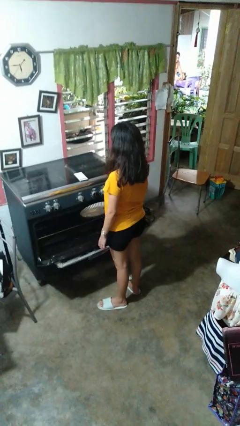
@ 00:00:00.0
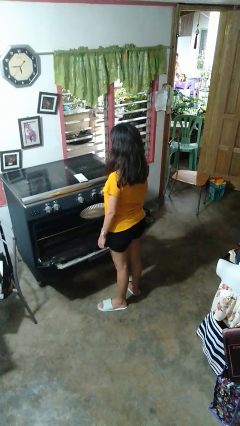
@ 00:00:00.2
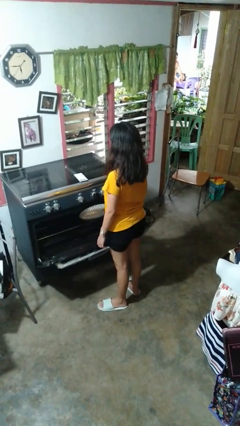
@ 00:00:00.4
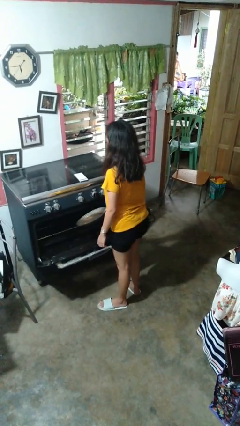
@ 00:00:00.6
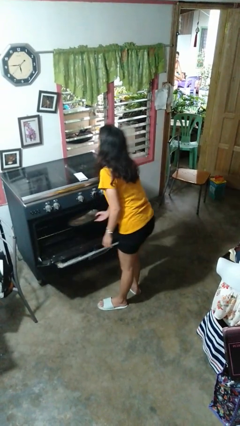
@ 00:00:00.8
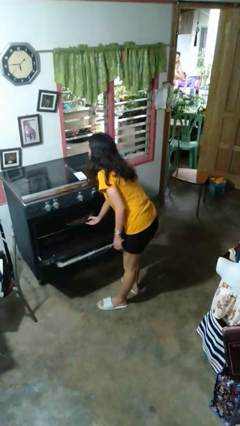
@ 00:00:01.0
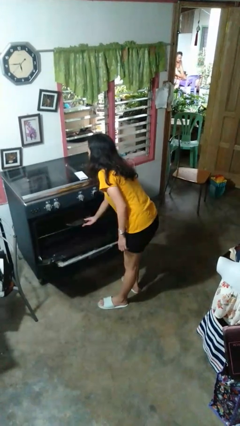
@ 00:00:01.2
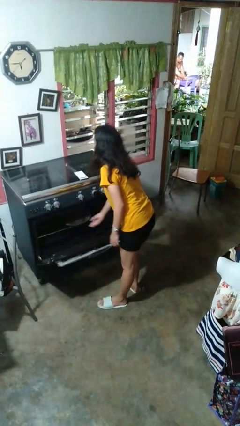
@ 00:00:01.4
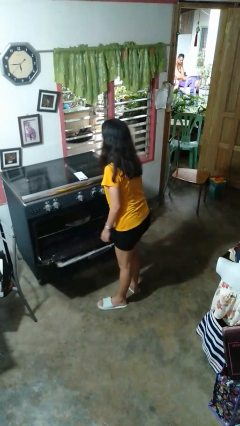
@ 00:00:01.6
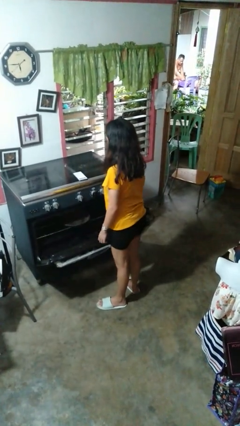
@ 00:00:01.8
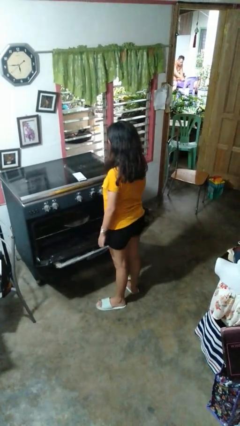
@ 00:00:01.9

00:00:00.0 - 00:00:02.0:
person puts object into oven

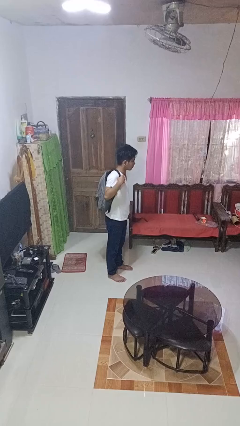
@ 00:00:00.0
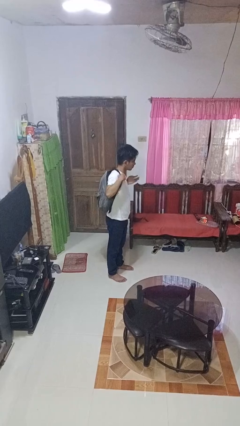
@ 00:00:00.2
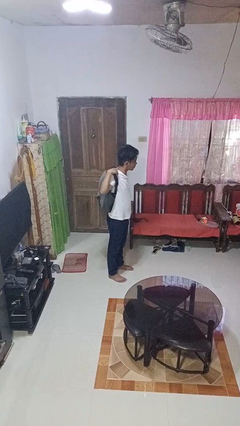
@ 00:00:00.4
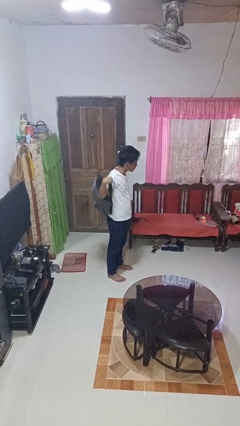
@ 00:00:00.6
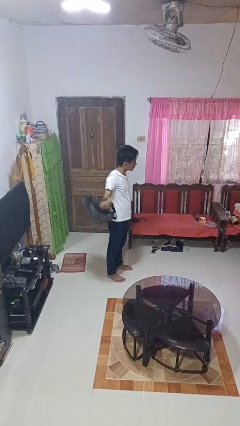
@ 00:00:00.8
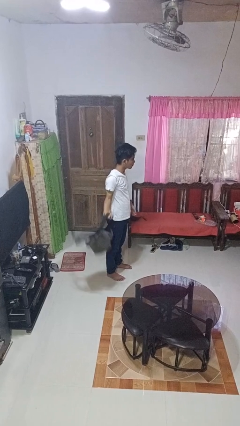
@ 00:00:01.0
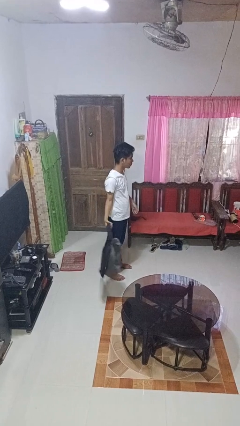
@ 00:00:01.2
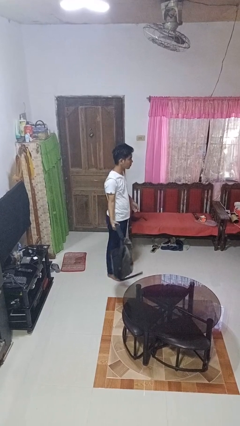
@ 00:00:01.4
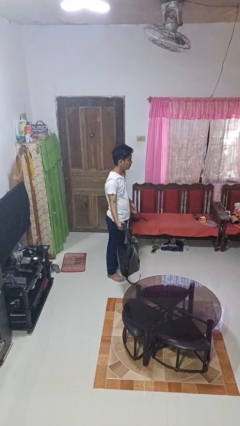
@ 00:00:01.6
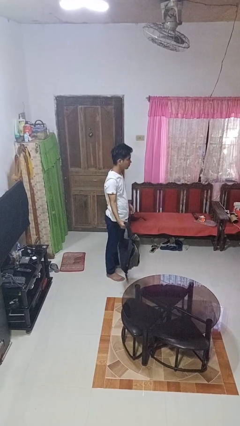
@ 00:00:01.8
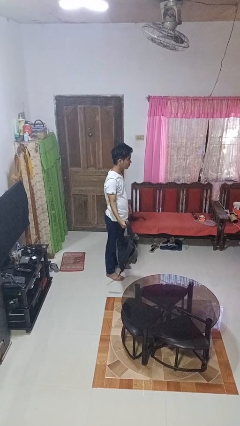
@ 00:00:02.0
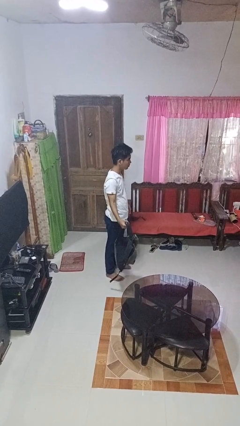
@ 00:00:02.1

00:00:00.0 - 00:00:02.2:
person takes off backpack

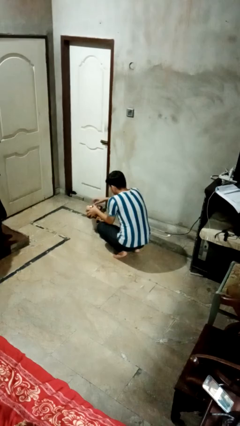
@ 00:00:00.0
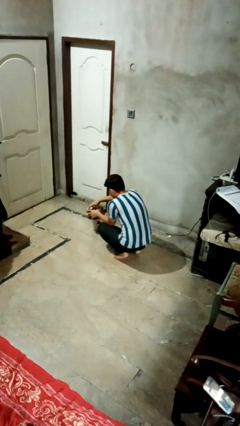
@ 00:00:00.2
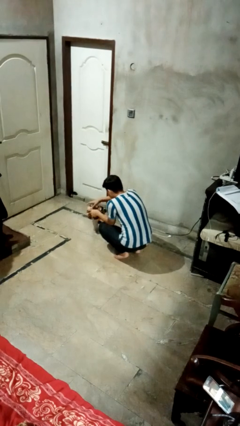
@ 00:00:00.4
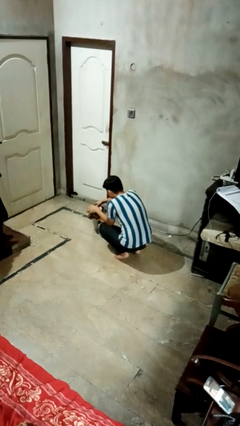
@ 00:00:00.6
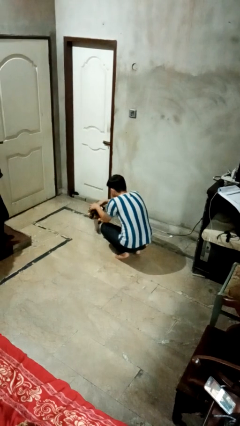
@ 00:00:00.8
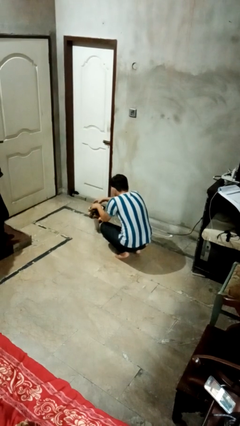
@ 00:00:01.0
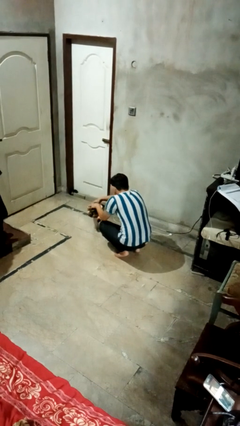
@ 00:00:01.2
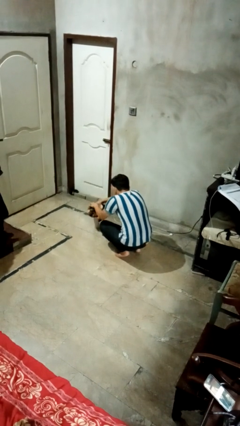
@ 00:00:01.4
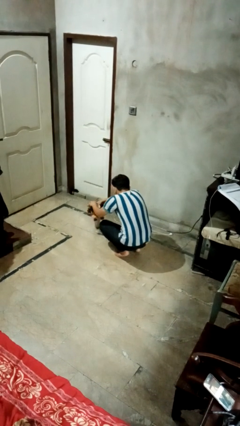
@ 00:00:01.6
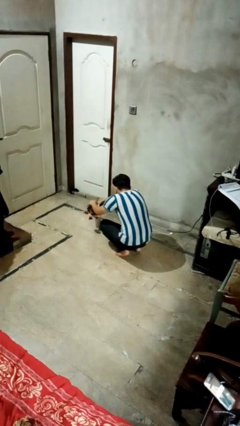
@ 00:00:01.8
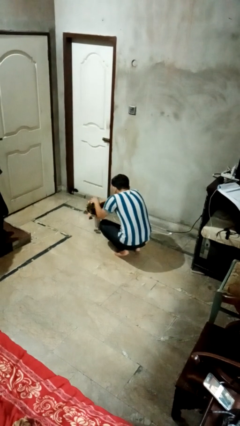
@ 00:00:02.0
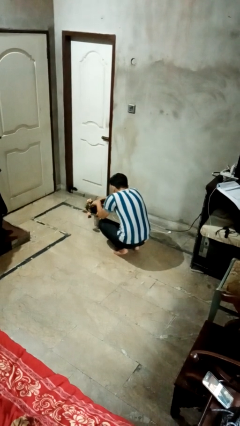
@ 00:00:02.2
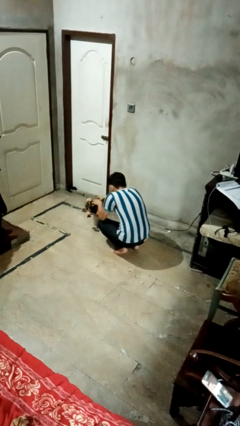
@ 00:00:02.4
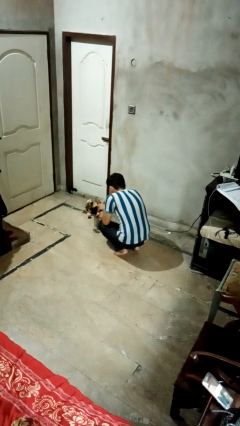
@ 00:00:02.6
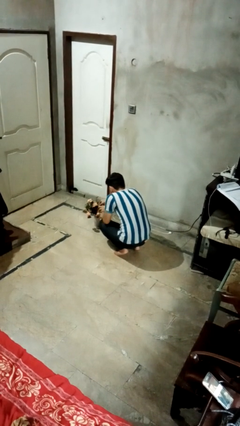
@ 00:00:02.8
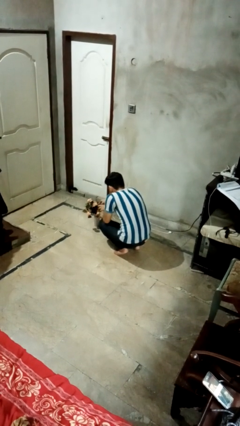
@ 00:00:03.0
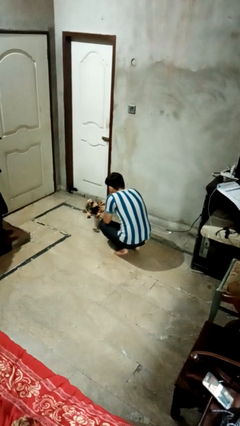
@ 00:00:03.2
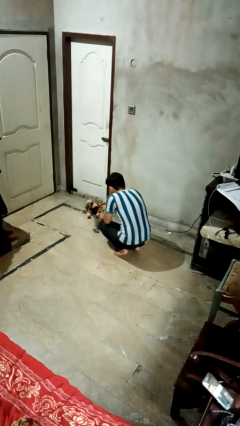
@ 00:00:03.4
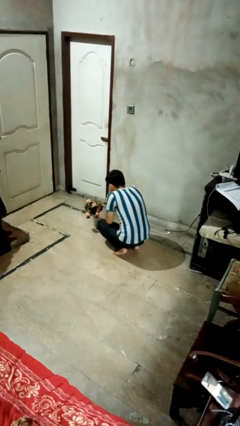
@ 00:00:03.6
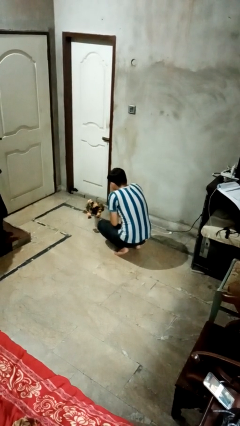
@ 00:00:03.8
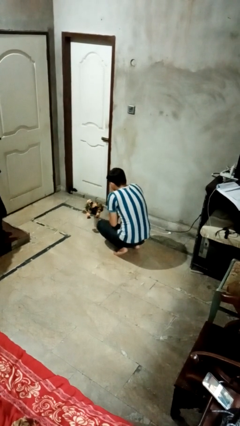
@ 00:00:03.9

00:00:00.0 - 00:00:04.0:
person arranges flowers in vase

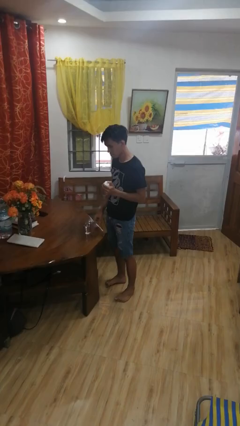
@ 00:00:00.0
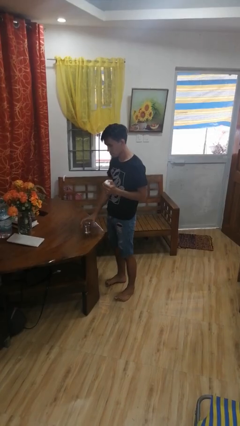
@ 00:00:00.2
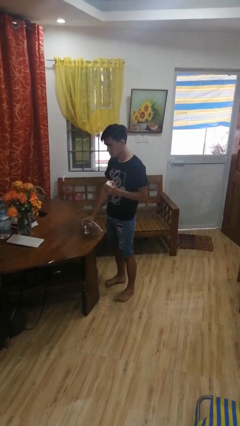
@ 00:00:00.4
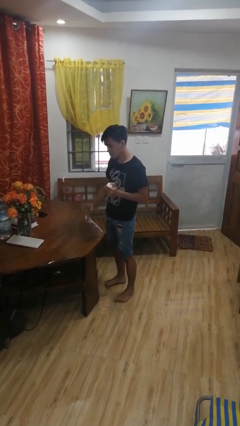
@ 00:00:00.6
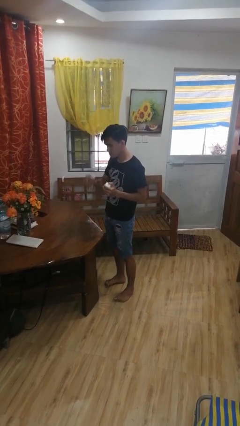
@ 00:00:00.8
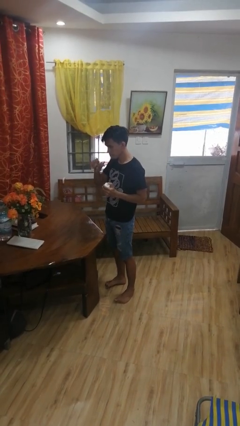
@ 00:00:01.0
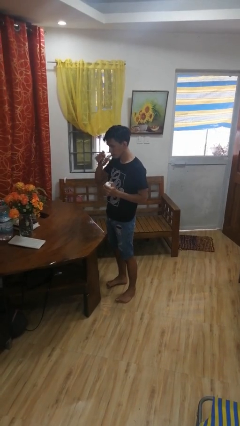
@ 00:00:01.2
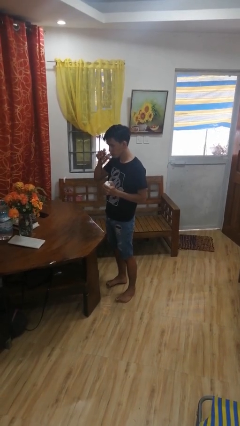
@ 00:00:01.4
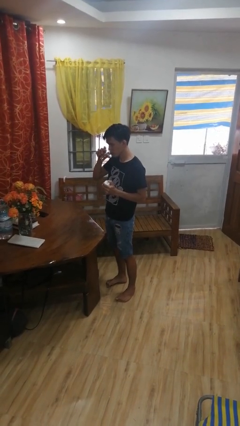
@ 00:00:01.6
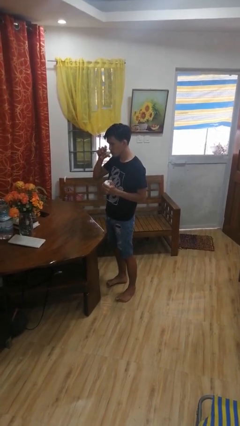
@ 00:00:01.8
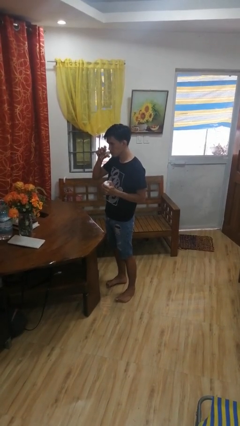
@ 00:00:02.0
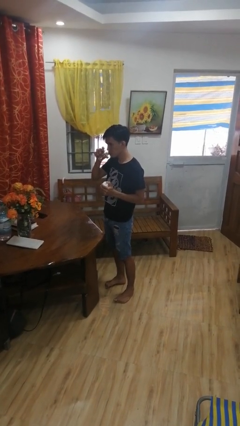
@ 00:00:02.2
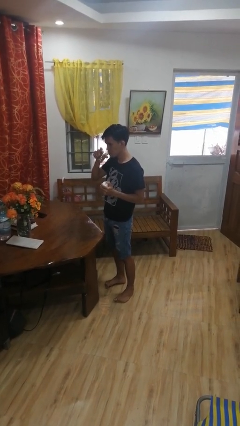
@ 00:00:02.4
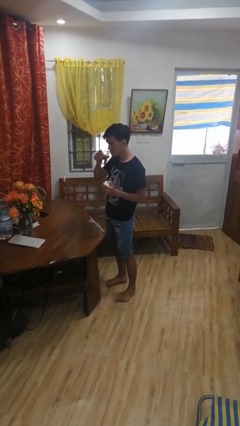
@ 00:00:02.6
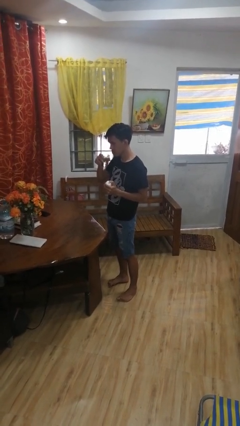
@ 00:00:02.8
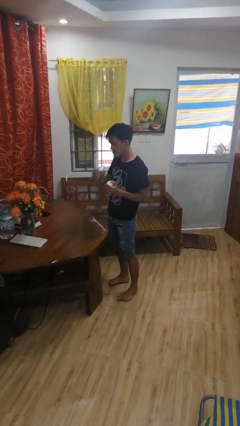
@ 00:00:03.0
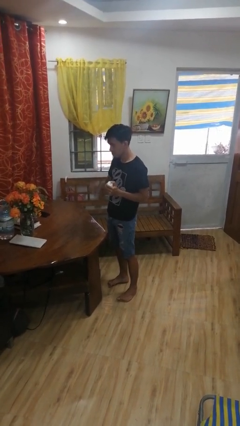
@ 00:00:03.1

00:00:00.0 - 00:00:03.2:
person drinks from cup

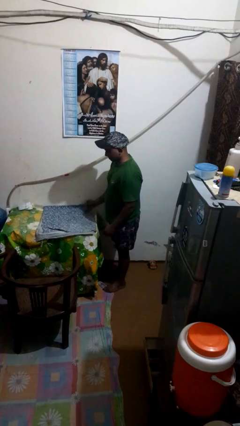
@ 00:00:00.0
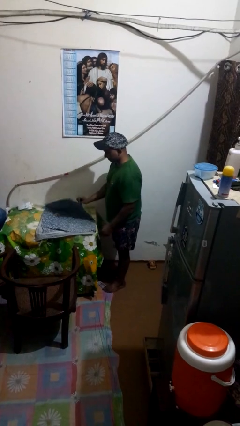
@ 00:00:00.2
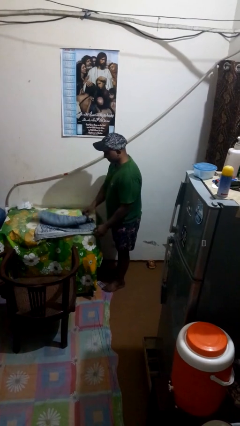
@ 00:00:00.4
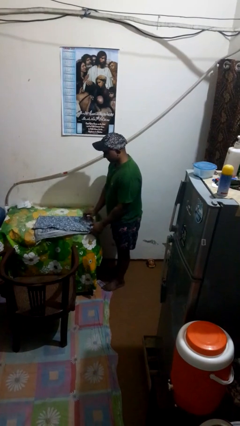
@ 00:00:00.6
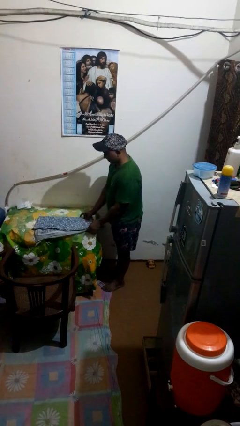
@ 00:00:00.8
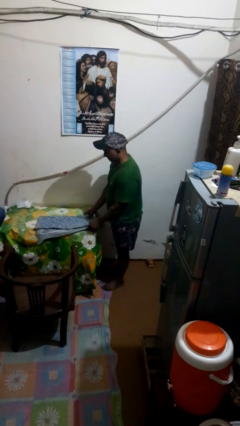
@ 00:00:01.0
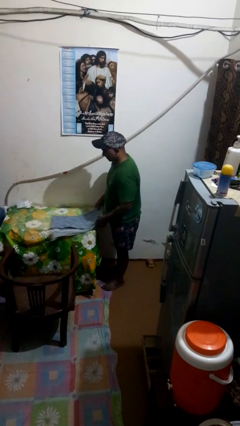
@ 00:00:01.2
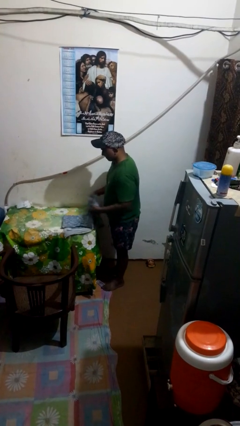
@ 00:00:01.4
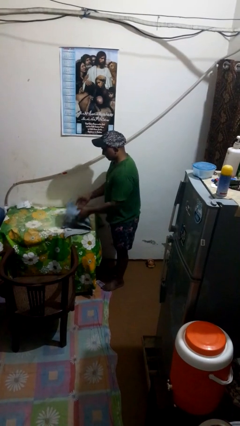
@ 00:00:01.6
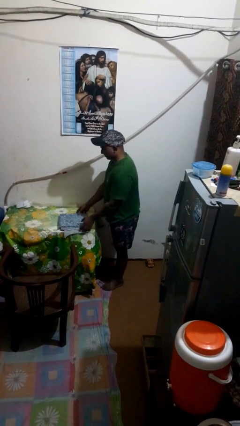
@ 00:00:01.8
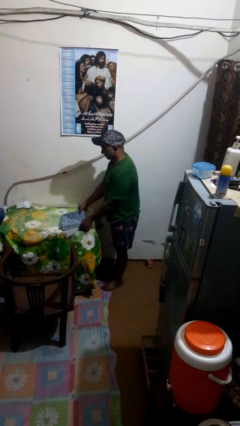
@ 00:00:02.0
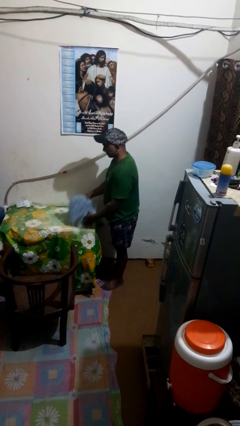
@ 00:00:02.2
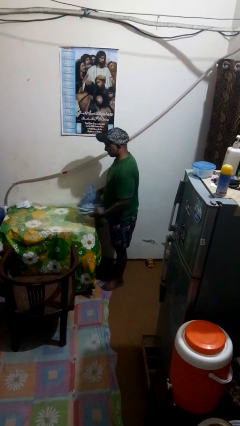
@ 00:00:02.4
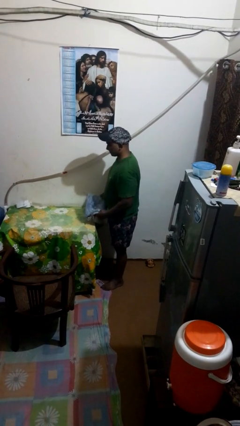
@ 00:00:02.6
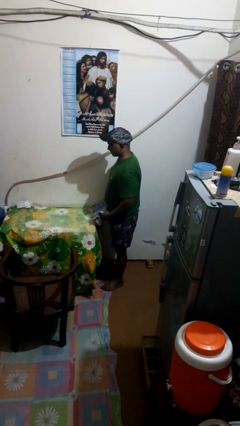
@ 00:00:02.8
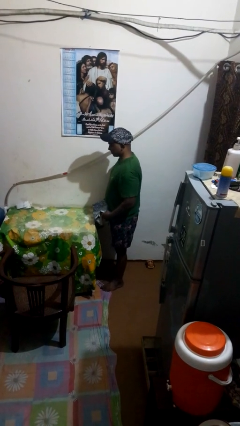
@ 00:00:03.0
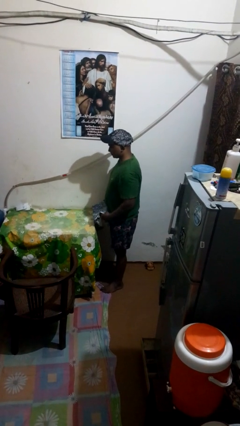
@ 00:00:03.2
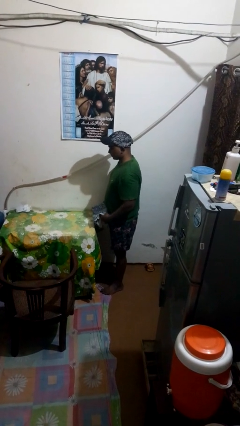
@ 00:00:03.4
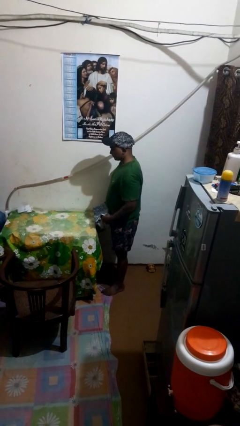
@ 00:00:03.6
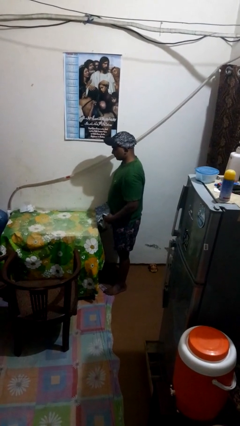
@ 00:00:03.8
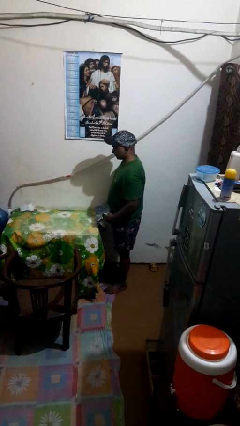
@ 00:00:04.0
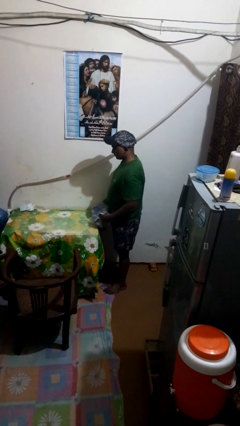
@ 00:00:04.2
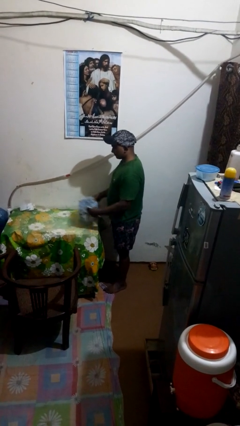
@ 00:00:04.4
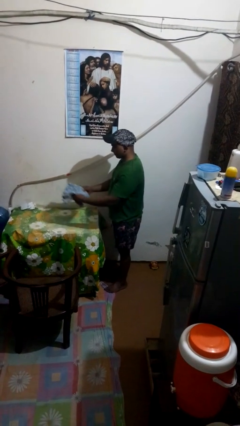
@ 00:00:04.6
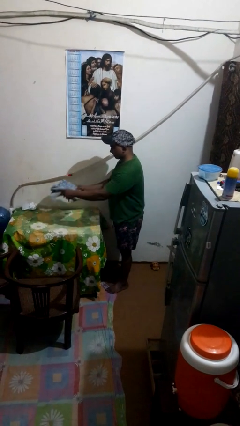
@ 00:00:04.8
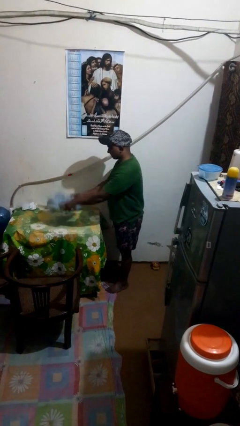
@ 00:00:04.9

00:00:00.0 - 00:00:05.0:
person folds tablecloth

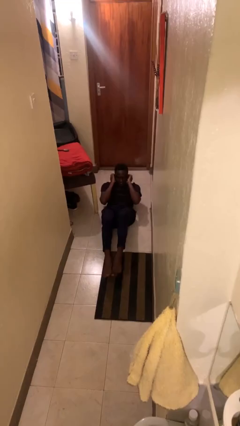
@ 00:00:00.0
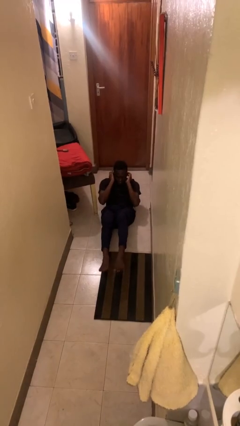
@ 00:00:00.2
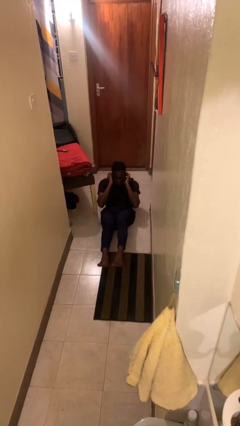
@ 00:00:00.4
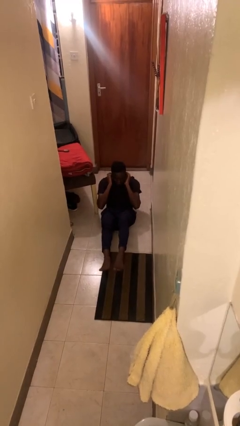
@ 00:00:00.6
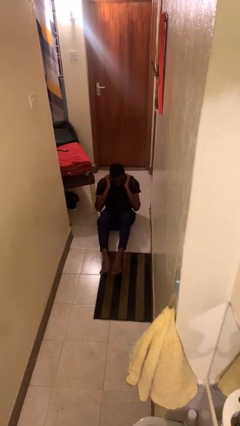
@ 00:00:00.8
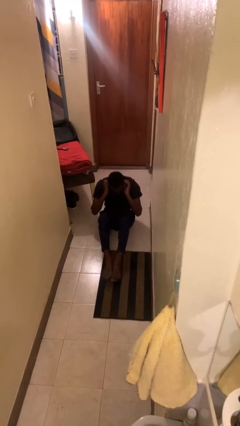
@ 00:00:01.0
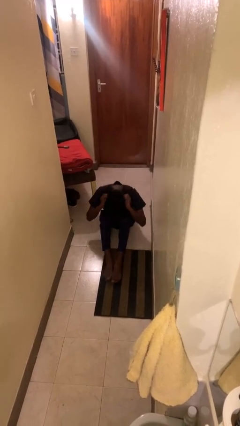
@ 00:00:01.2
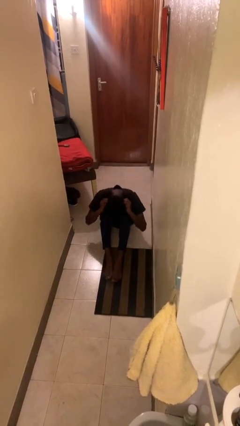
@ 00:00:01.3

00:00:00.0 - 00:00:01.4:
person exercises with situp
